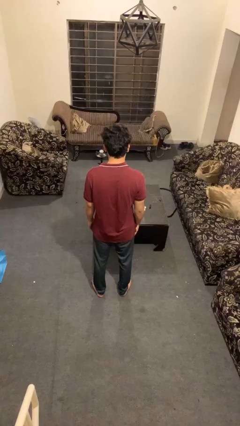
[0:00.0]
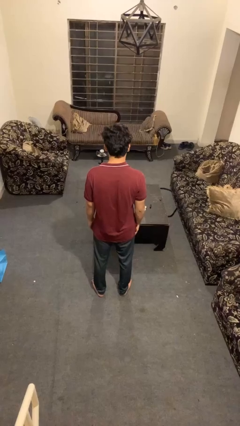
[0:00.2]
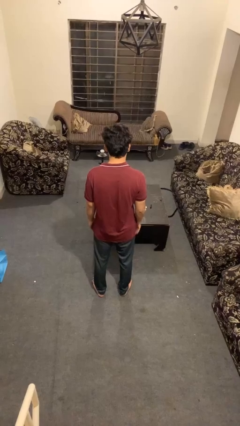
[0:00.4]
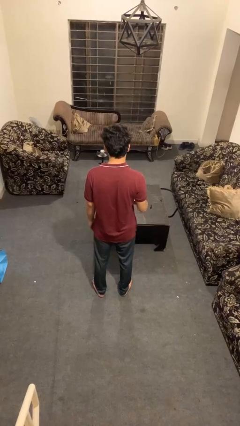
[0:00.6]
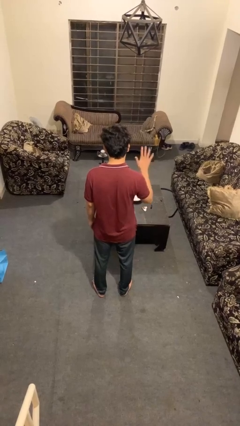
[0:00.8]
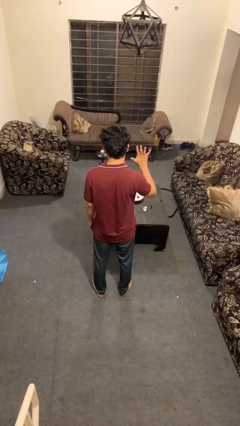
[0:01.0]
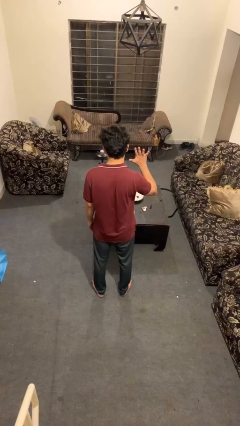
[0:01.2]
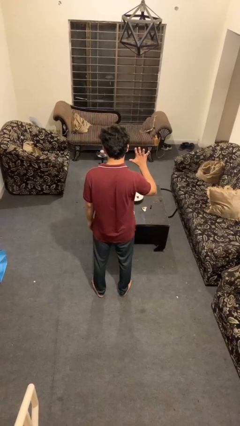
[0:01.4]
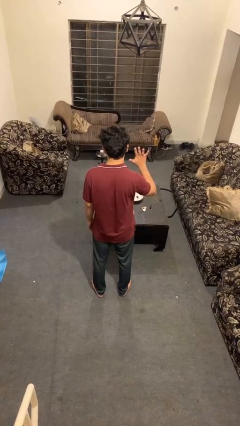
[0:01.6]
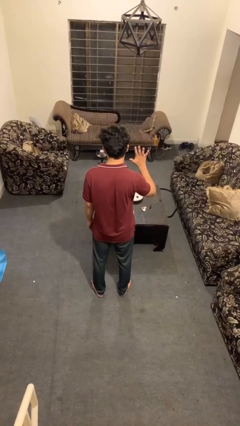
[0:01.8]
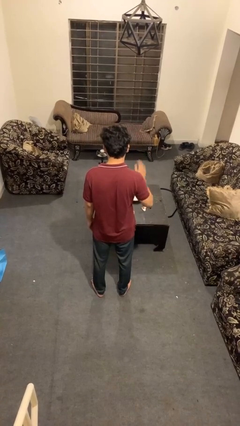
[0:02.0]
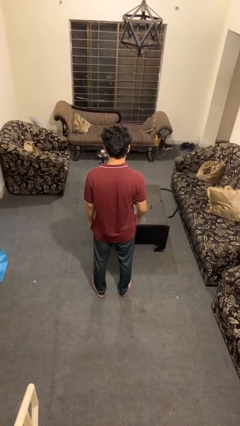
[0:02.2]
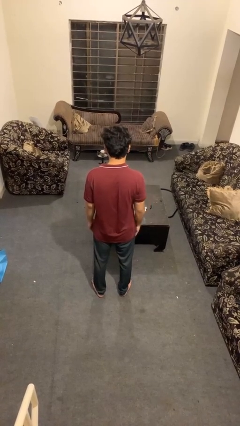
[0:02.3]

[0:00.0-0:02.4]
person gestures number five

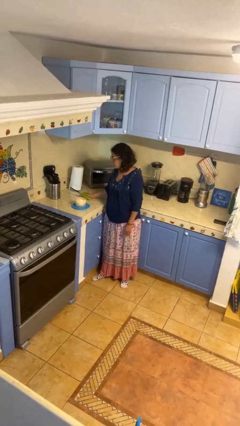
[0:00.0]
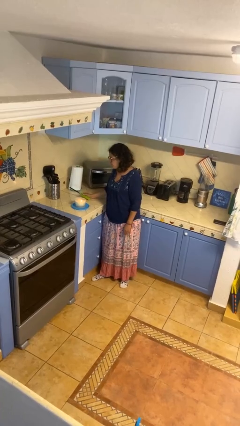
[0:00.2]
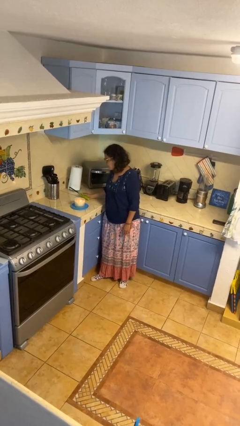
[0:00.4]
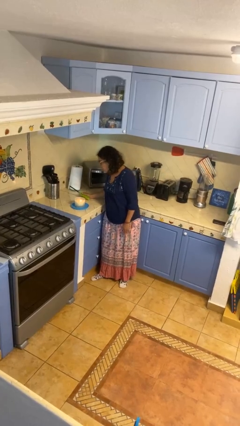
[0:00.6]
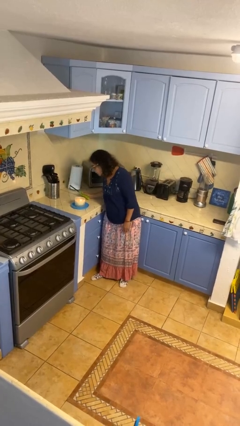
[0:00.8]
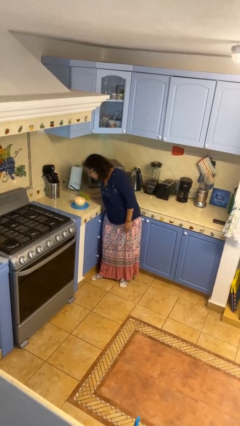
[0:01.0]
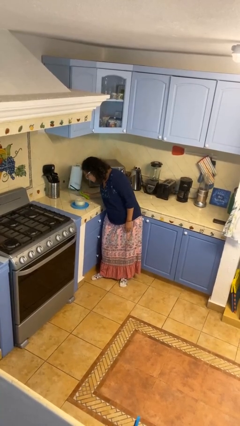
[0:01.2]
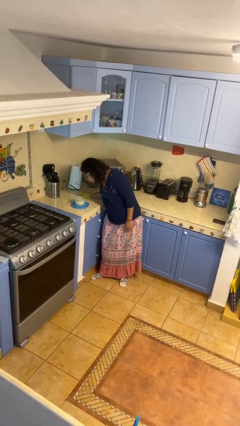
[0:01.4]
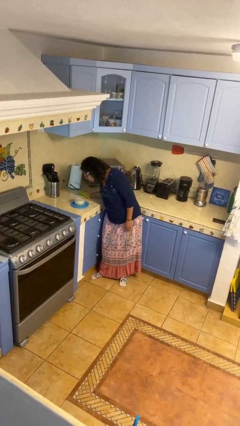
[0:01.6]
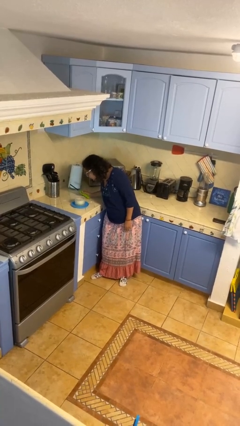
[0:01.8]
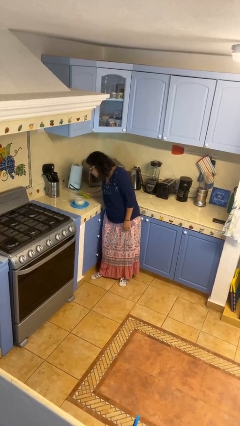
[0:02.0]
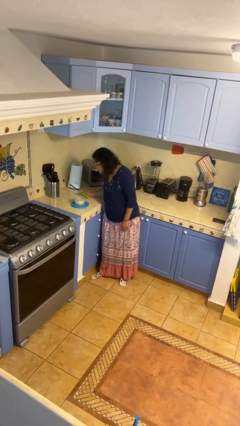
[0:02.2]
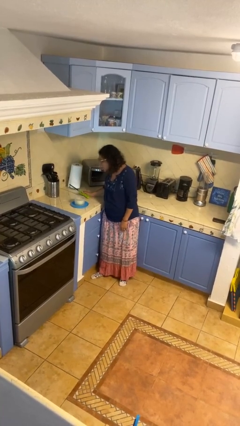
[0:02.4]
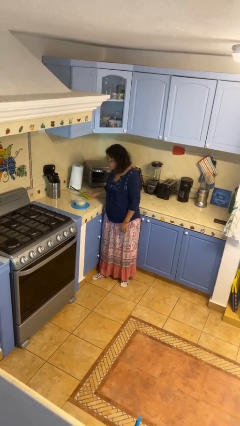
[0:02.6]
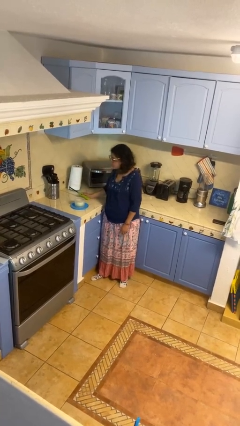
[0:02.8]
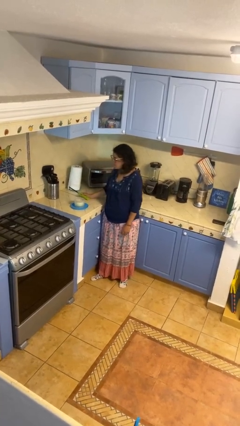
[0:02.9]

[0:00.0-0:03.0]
person extinguishes candle

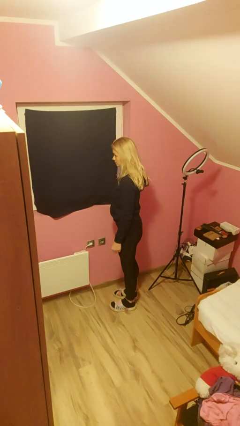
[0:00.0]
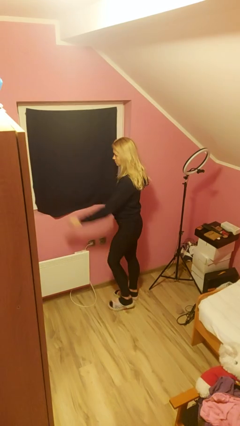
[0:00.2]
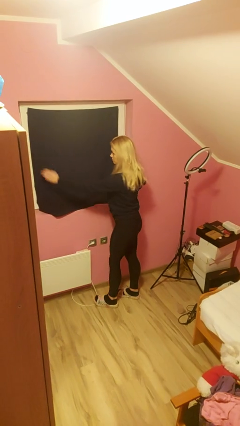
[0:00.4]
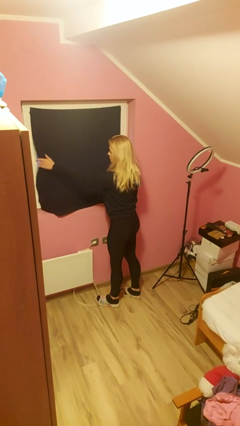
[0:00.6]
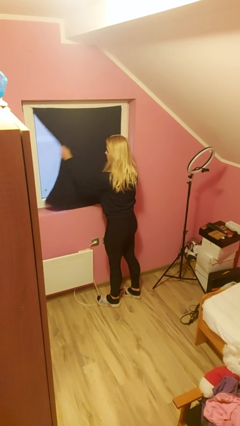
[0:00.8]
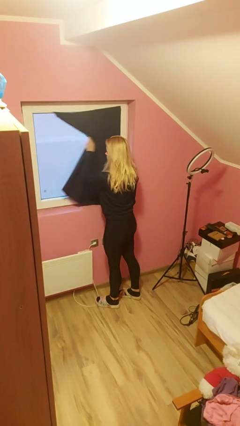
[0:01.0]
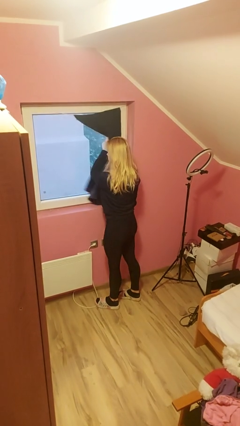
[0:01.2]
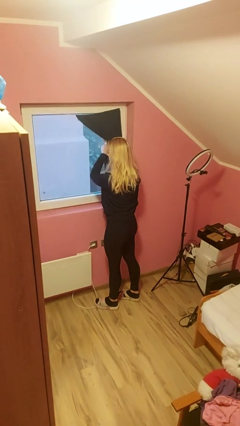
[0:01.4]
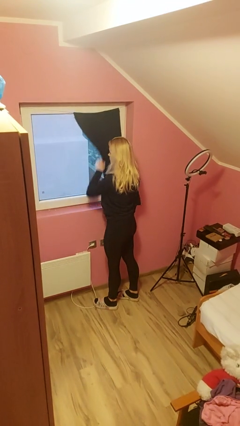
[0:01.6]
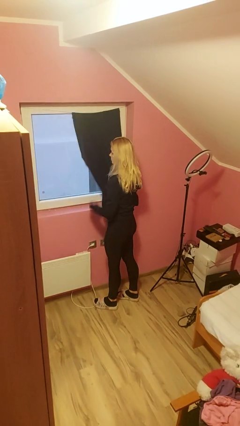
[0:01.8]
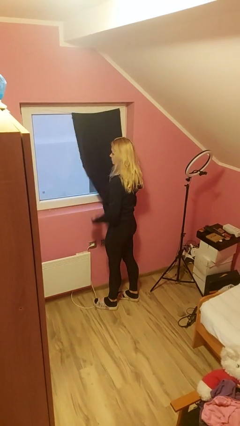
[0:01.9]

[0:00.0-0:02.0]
person opens curtains

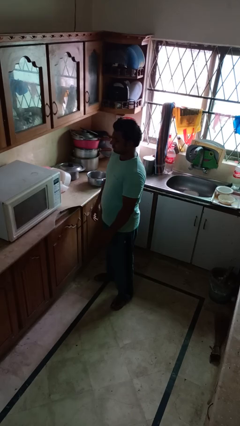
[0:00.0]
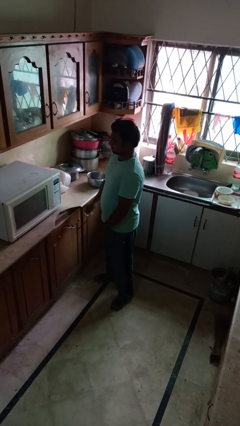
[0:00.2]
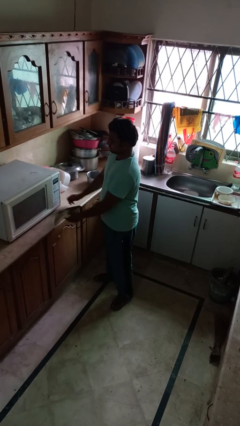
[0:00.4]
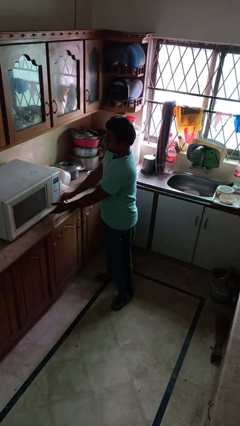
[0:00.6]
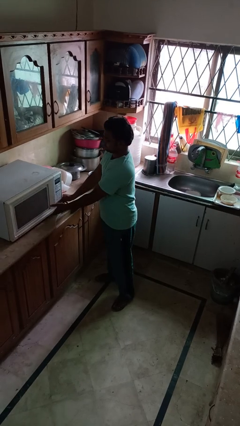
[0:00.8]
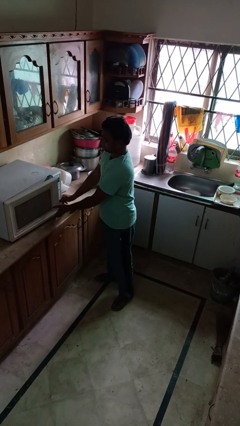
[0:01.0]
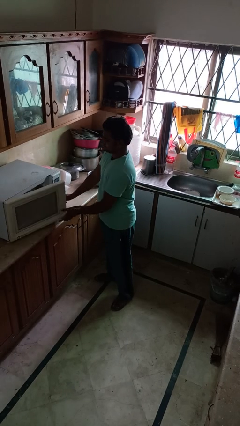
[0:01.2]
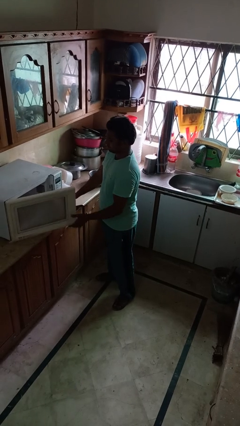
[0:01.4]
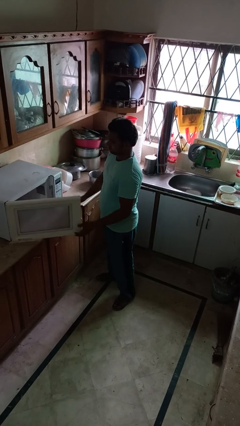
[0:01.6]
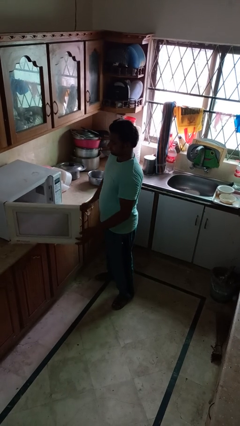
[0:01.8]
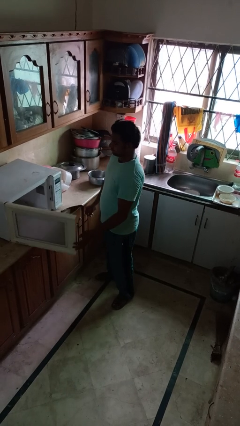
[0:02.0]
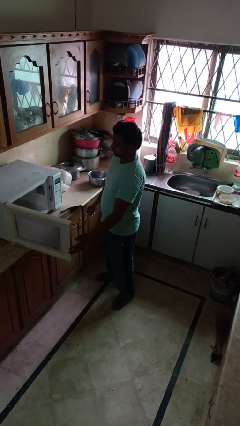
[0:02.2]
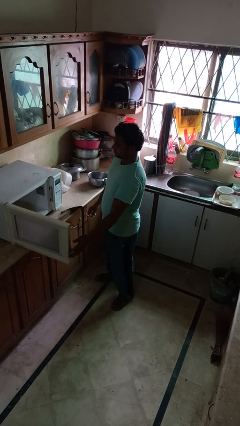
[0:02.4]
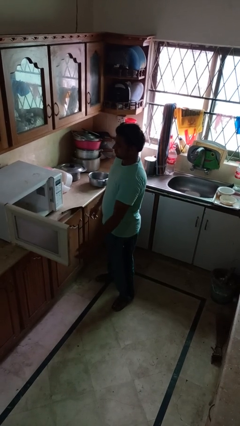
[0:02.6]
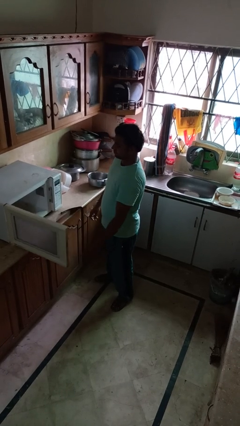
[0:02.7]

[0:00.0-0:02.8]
person opens microwave

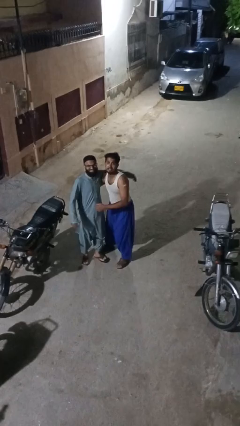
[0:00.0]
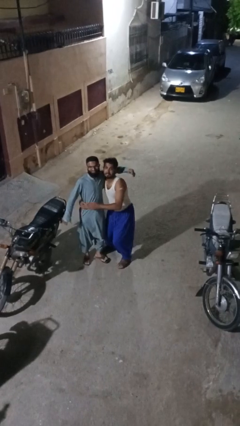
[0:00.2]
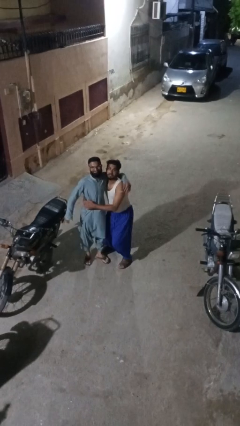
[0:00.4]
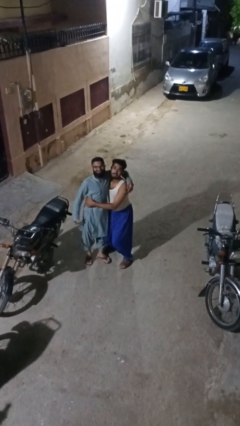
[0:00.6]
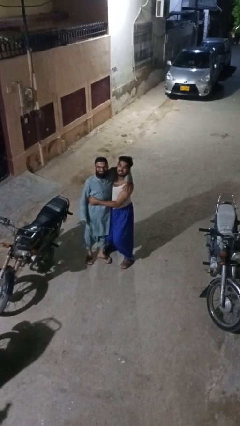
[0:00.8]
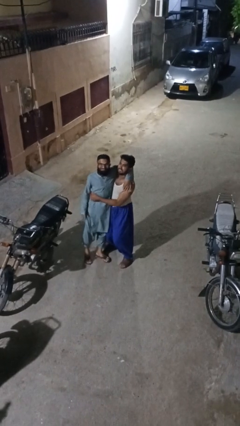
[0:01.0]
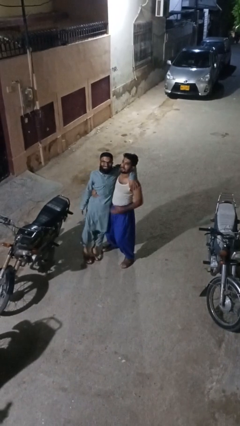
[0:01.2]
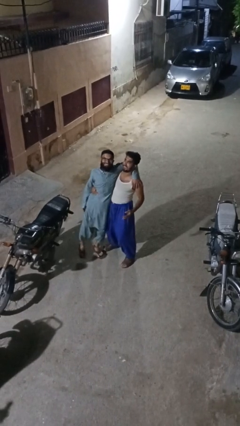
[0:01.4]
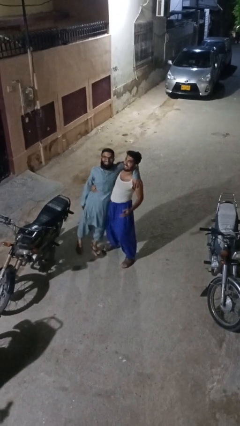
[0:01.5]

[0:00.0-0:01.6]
person picks up person

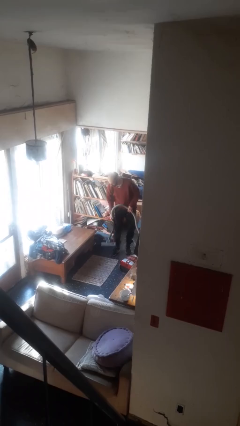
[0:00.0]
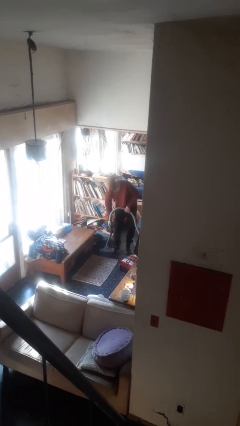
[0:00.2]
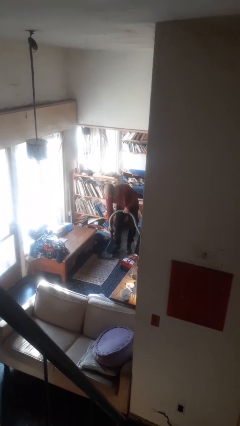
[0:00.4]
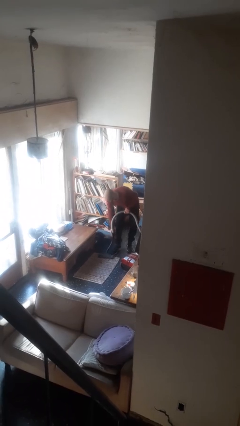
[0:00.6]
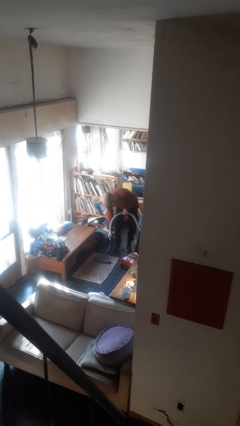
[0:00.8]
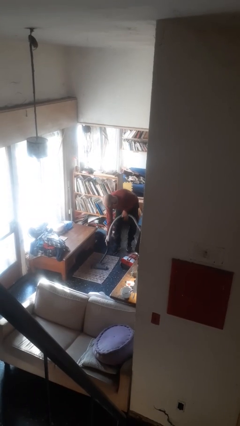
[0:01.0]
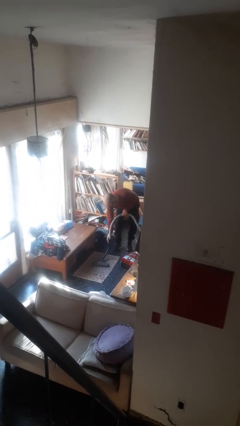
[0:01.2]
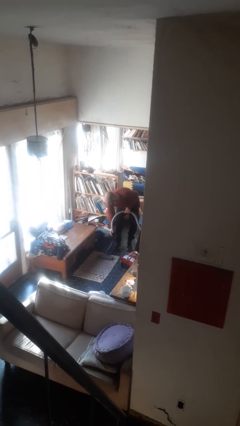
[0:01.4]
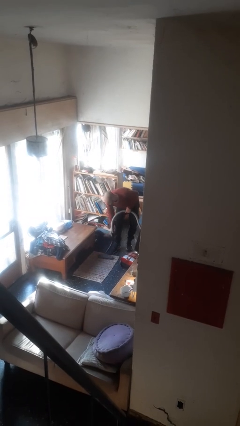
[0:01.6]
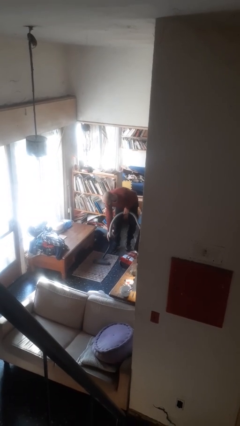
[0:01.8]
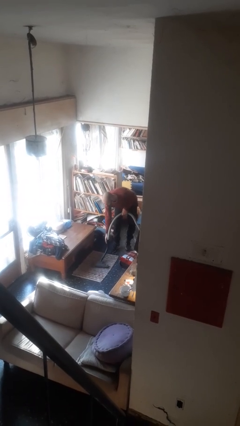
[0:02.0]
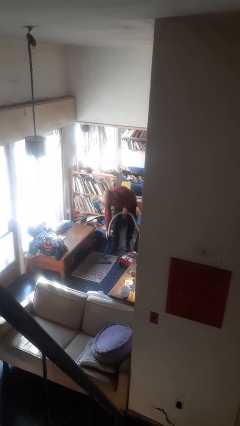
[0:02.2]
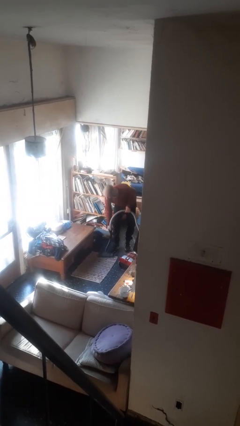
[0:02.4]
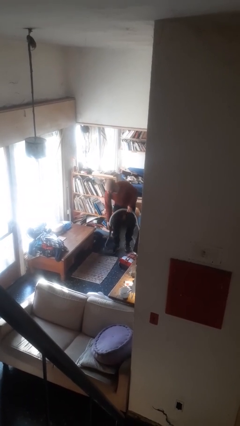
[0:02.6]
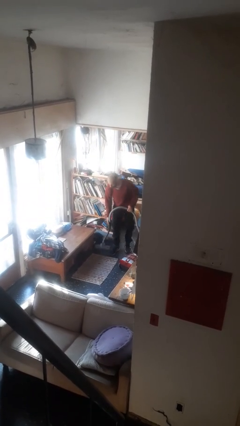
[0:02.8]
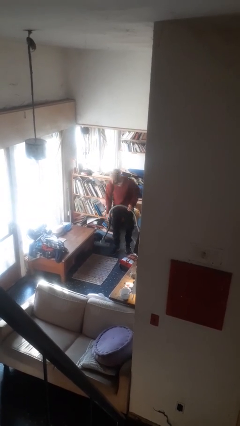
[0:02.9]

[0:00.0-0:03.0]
person vacuums carpet

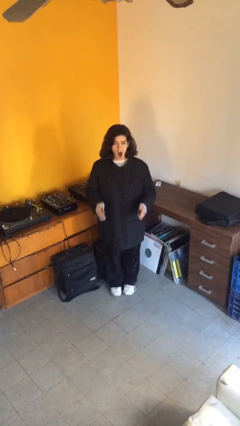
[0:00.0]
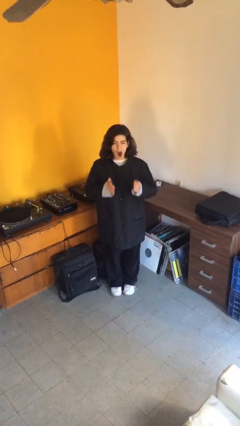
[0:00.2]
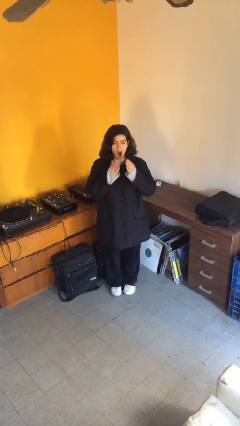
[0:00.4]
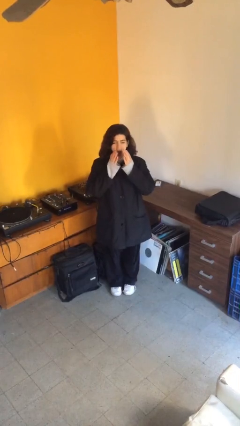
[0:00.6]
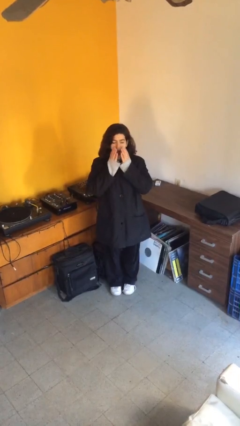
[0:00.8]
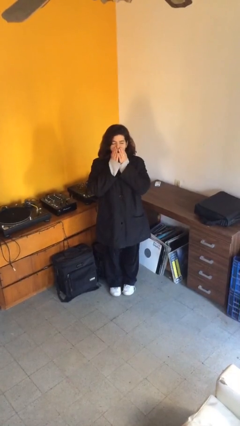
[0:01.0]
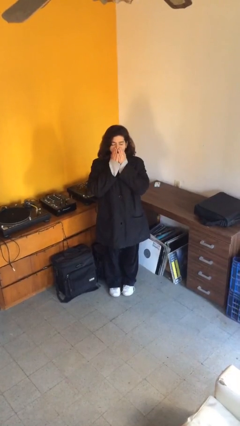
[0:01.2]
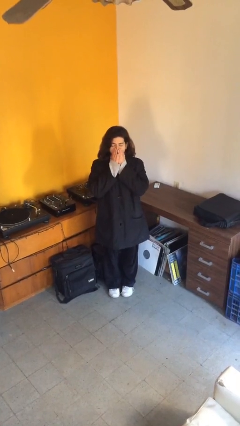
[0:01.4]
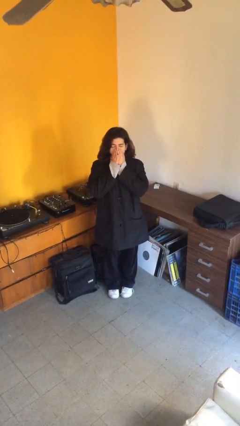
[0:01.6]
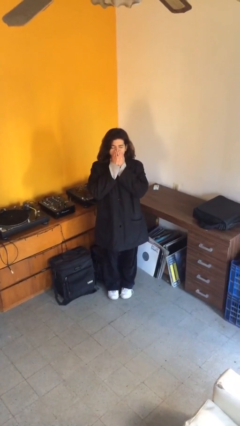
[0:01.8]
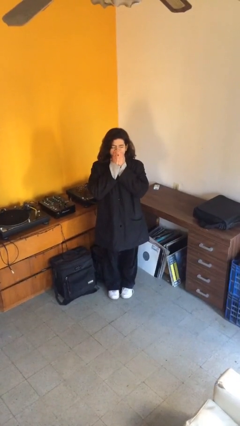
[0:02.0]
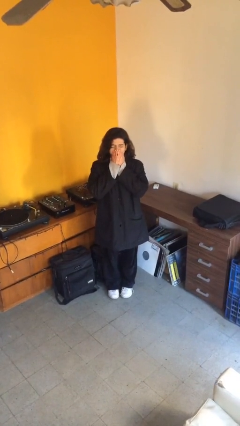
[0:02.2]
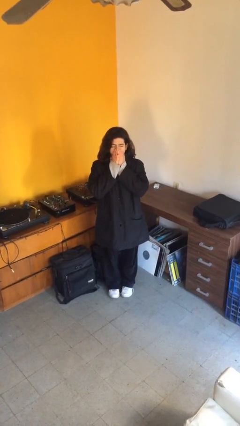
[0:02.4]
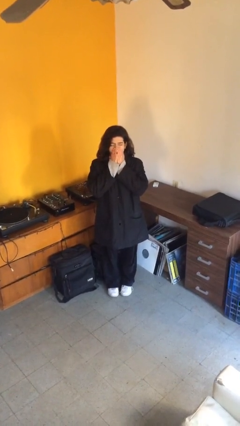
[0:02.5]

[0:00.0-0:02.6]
person yawns

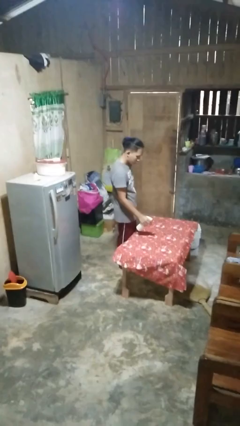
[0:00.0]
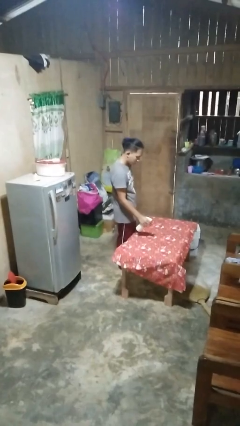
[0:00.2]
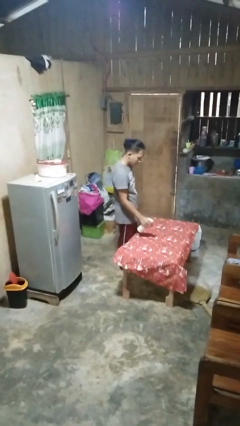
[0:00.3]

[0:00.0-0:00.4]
person sprays from bottle
